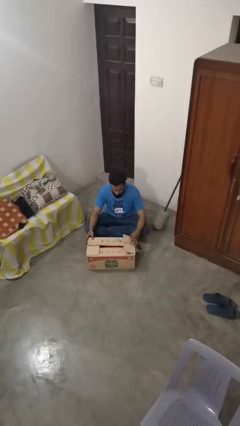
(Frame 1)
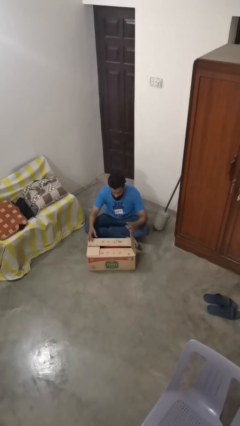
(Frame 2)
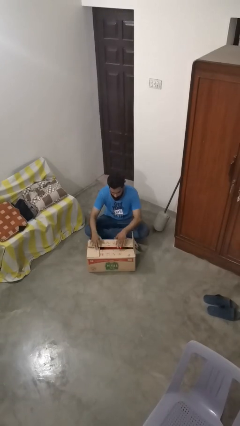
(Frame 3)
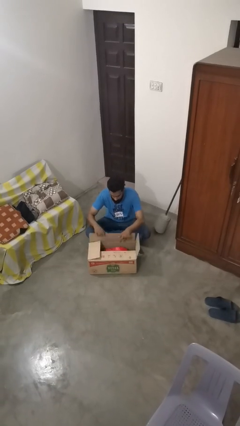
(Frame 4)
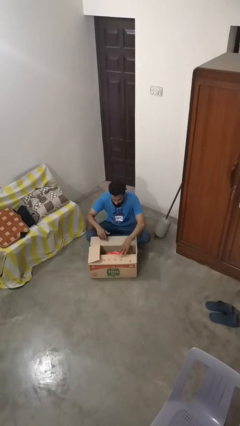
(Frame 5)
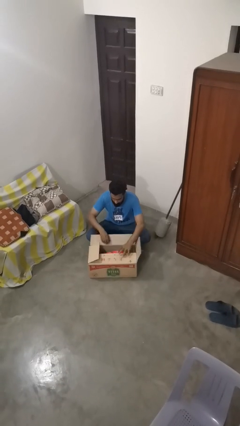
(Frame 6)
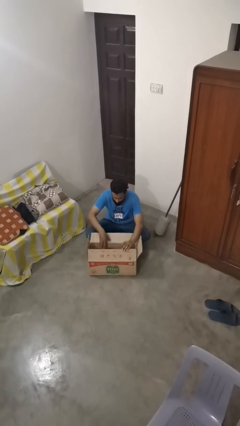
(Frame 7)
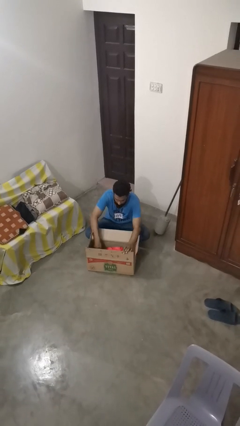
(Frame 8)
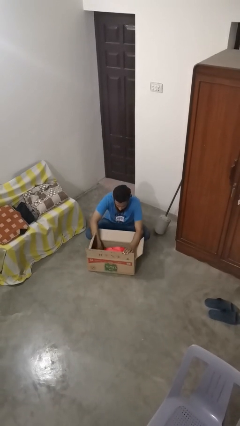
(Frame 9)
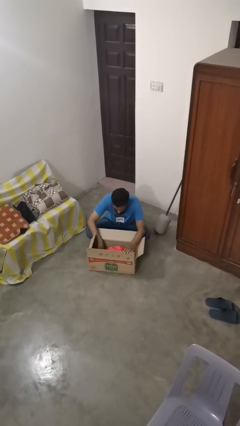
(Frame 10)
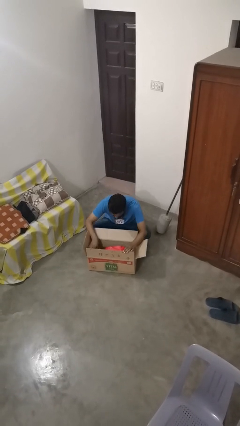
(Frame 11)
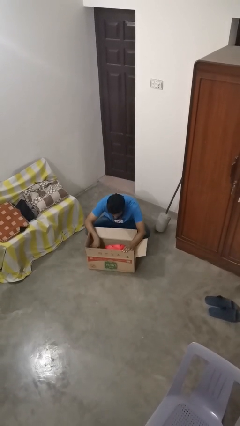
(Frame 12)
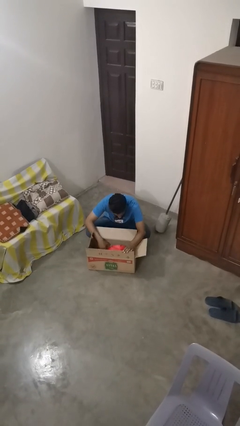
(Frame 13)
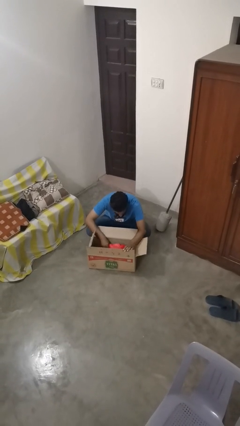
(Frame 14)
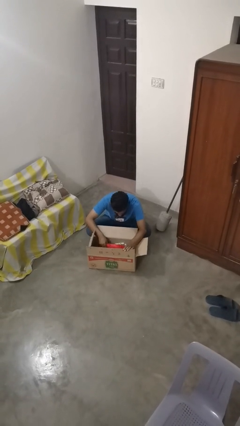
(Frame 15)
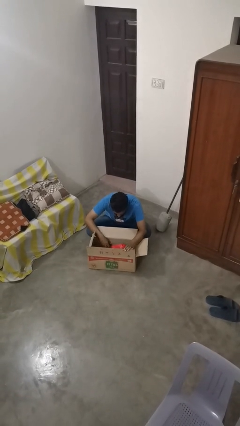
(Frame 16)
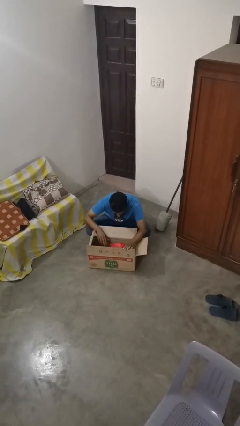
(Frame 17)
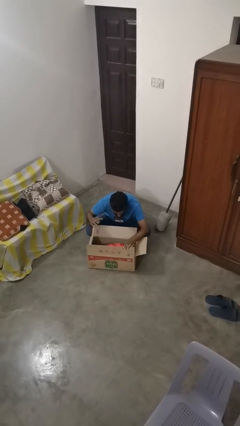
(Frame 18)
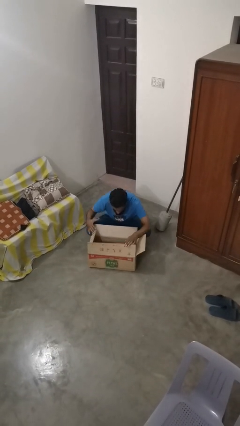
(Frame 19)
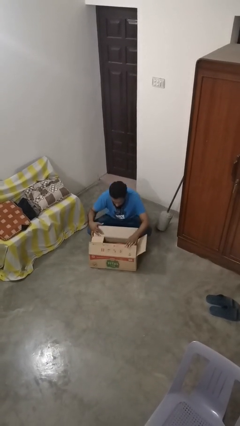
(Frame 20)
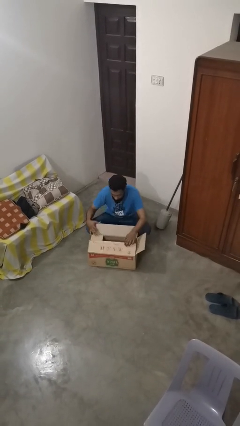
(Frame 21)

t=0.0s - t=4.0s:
person searches in box

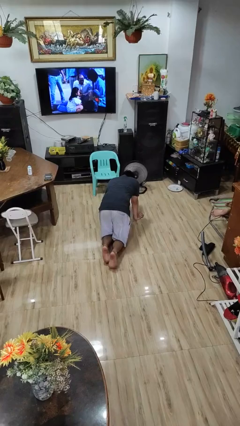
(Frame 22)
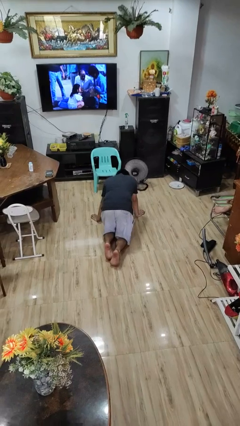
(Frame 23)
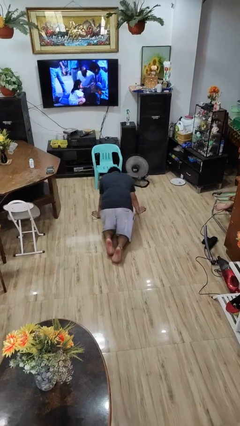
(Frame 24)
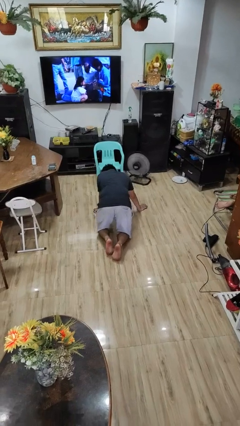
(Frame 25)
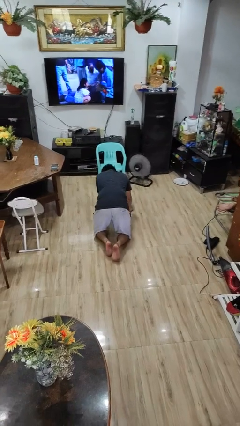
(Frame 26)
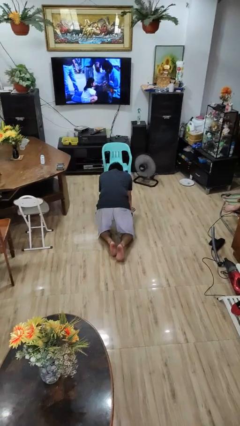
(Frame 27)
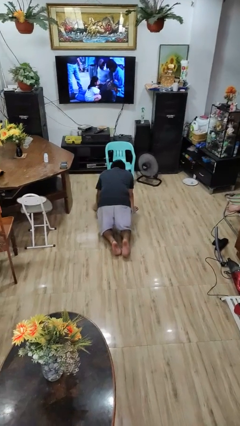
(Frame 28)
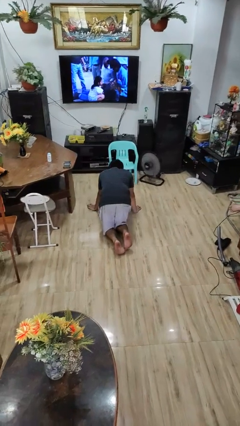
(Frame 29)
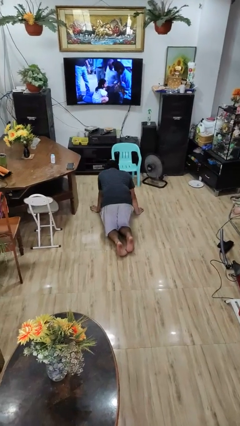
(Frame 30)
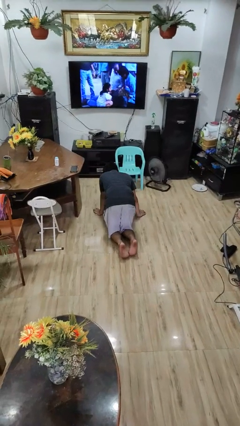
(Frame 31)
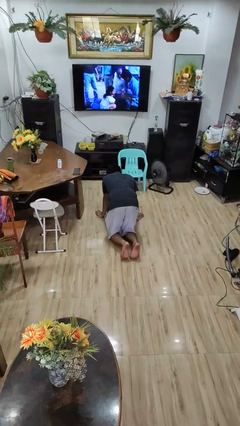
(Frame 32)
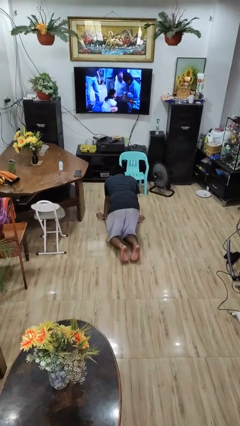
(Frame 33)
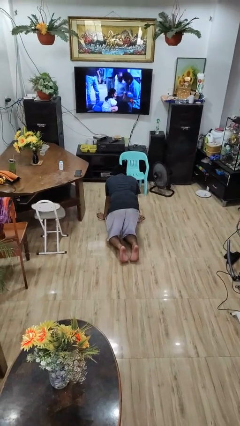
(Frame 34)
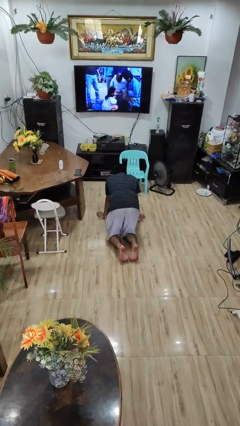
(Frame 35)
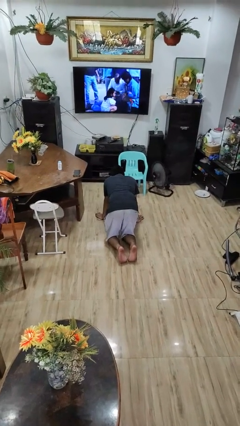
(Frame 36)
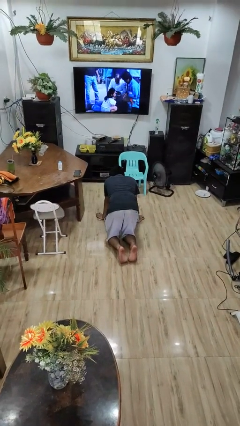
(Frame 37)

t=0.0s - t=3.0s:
person crawls

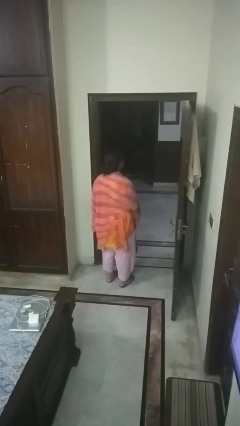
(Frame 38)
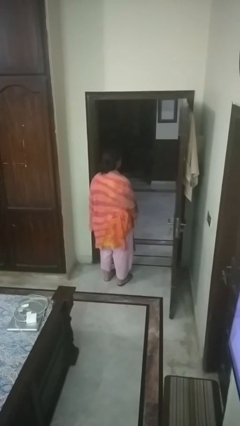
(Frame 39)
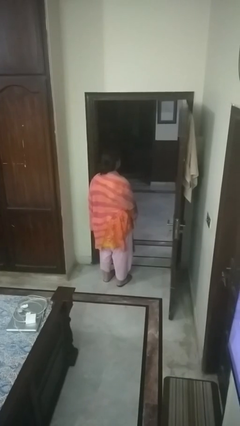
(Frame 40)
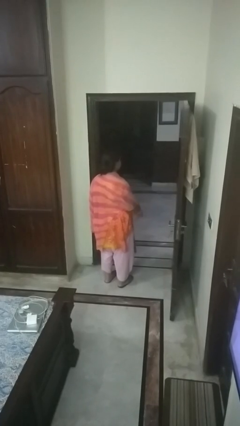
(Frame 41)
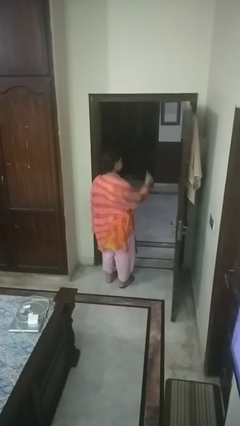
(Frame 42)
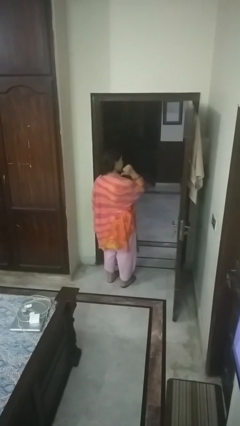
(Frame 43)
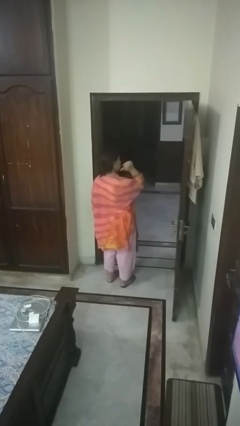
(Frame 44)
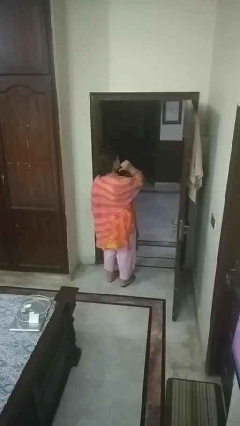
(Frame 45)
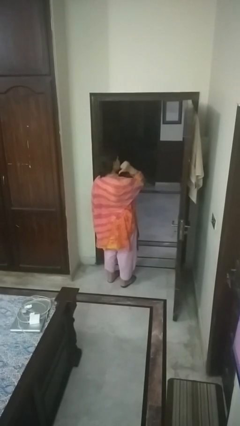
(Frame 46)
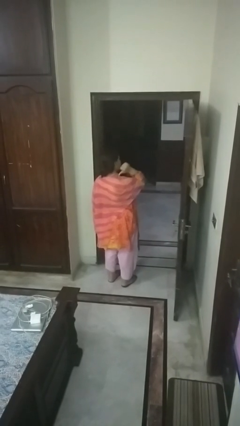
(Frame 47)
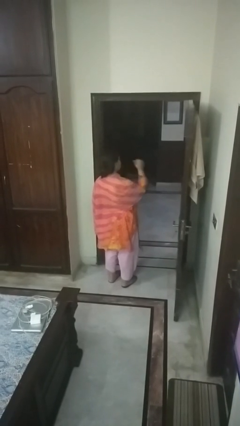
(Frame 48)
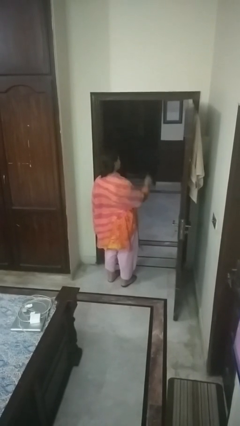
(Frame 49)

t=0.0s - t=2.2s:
person gestures behind me

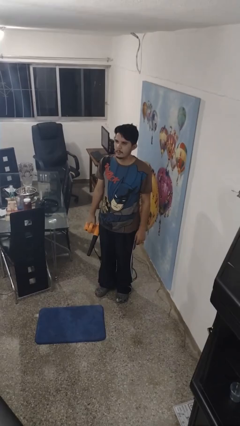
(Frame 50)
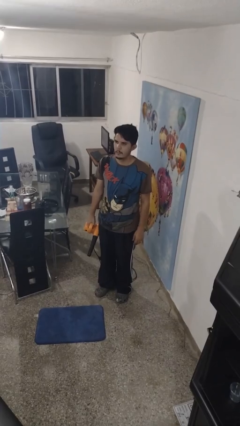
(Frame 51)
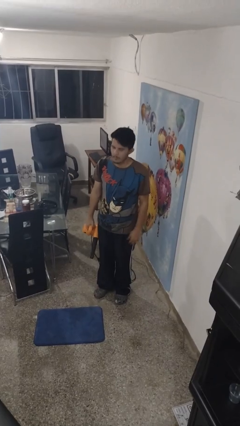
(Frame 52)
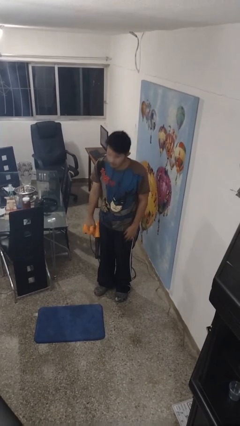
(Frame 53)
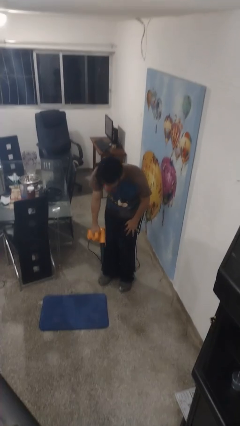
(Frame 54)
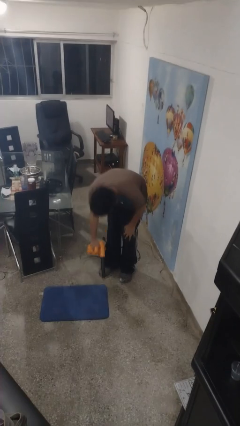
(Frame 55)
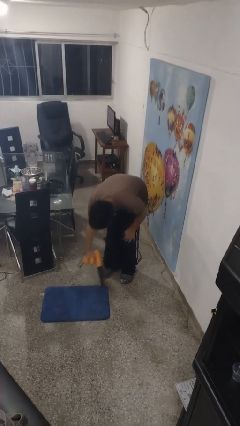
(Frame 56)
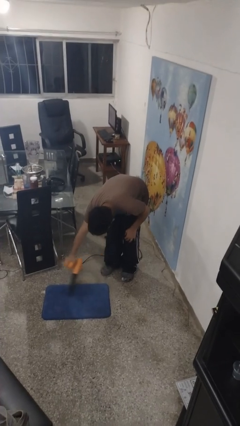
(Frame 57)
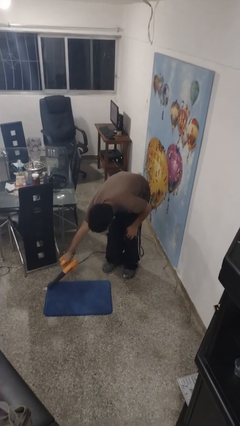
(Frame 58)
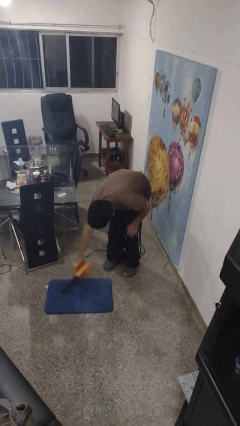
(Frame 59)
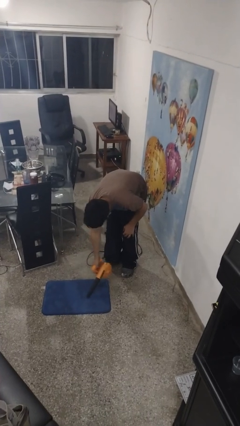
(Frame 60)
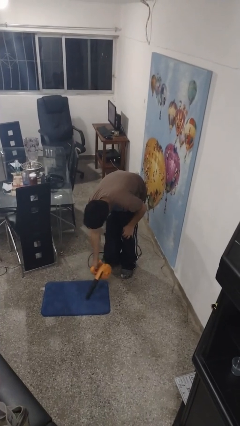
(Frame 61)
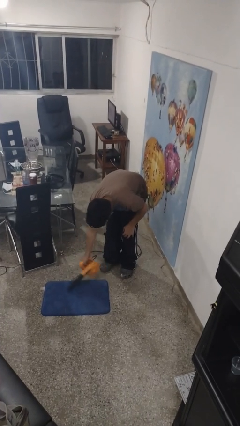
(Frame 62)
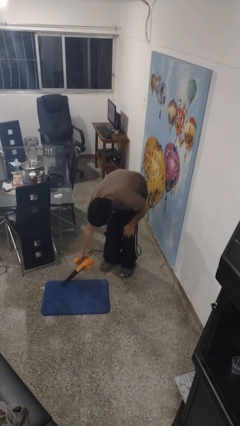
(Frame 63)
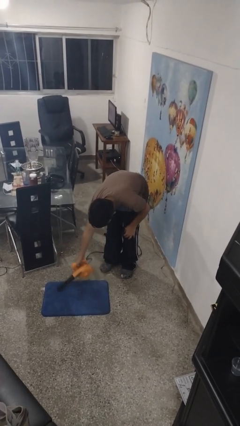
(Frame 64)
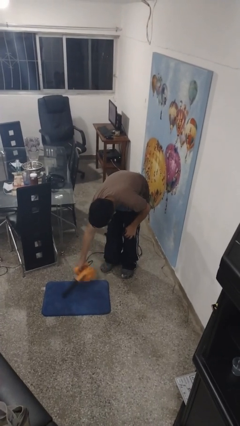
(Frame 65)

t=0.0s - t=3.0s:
person vacuums carpet

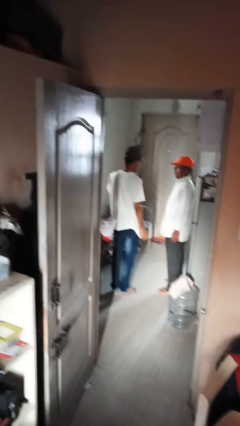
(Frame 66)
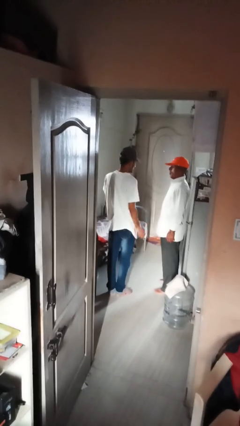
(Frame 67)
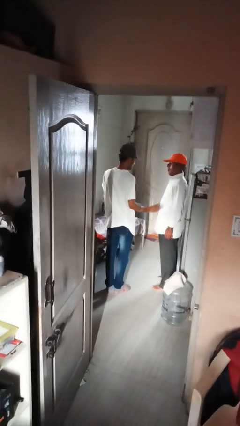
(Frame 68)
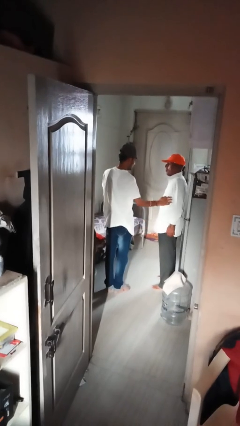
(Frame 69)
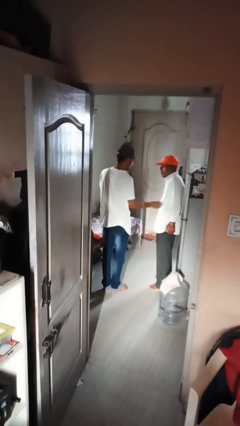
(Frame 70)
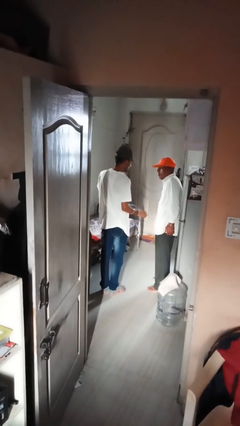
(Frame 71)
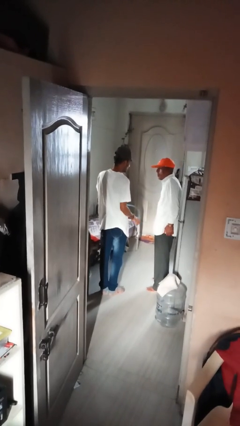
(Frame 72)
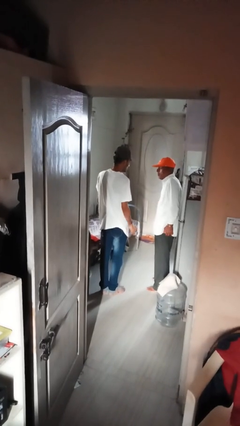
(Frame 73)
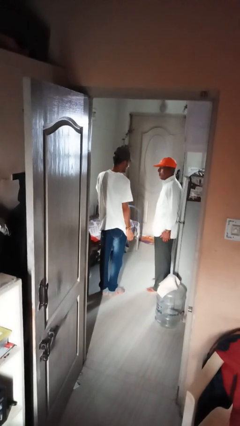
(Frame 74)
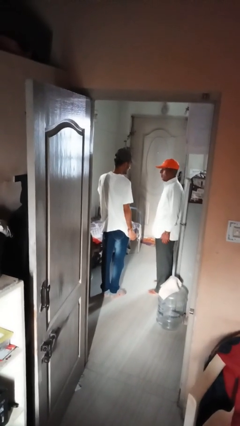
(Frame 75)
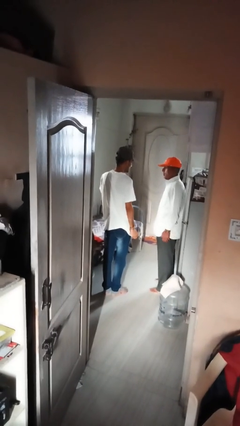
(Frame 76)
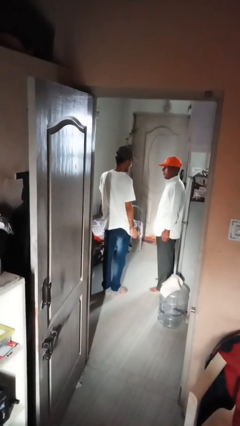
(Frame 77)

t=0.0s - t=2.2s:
person tickles person

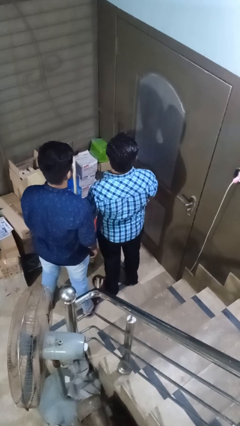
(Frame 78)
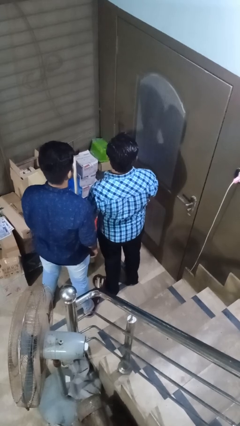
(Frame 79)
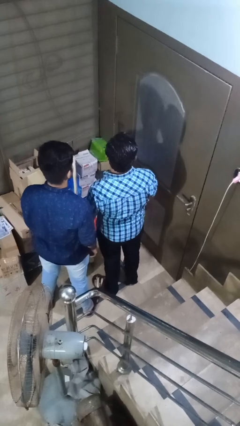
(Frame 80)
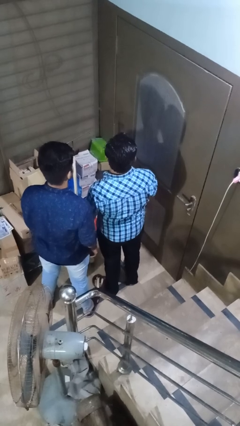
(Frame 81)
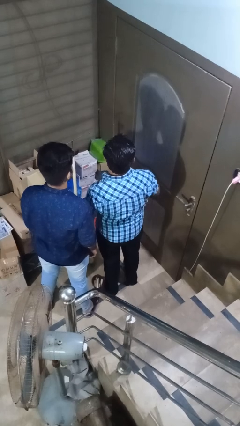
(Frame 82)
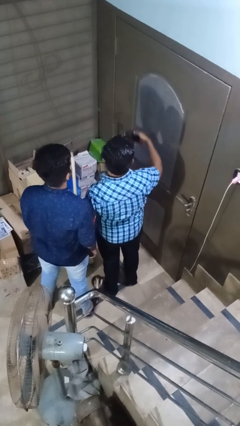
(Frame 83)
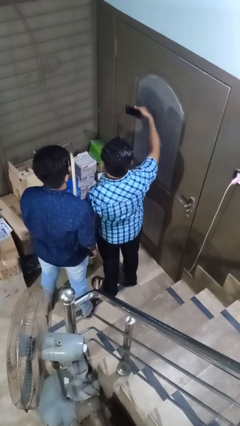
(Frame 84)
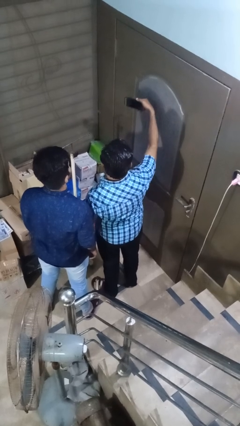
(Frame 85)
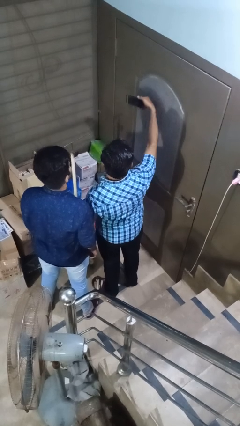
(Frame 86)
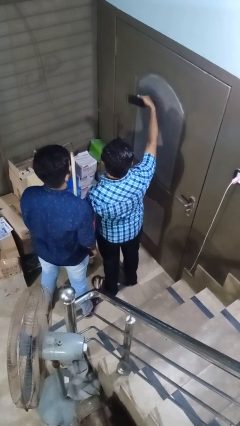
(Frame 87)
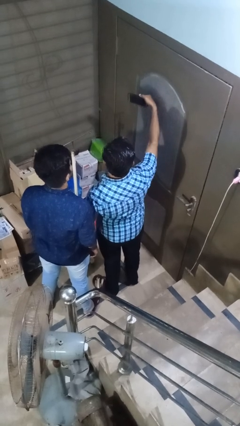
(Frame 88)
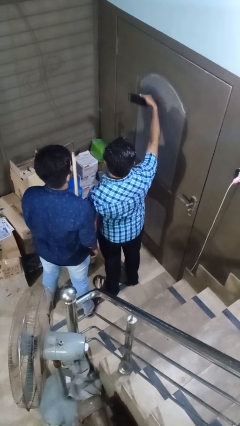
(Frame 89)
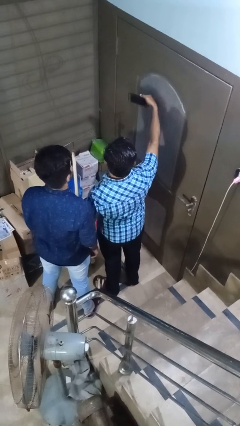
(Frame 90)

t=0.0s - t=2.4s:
person takes selfie with person

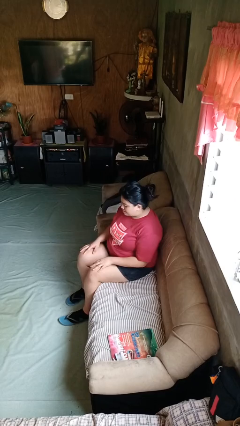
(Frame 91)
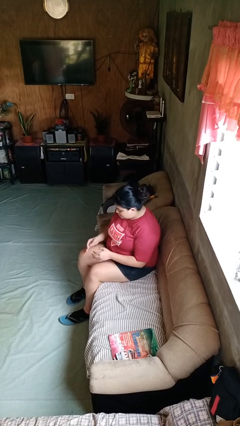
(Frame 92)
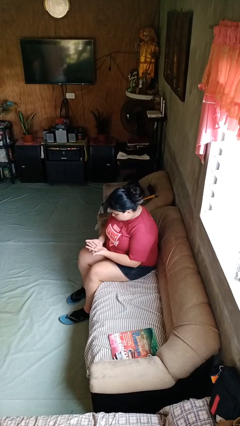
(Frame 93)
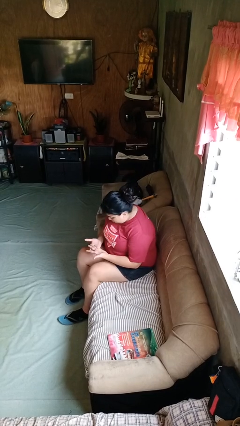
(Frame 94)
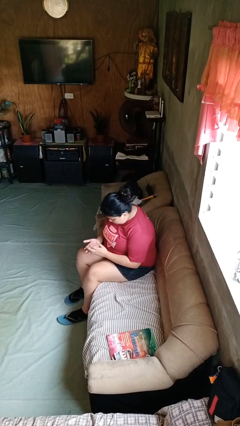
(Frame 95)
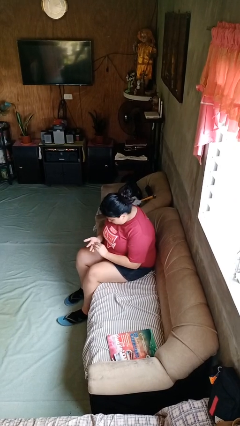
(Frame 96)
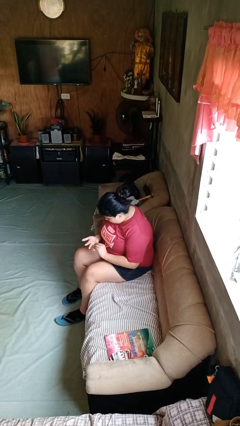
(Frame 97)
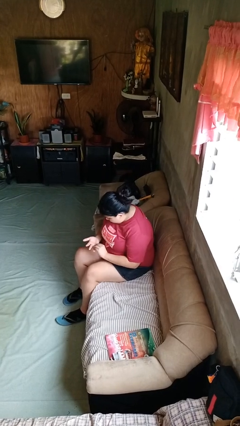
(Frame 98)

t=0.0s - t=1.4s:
person looks at hands in lap
